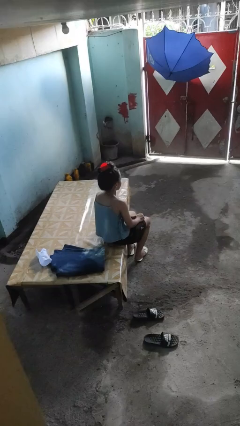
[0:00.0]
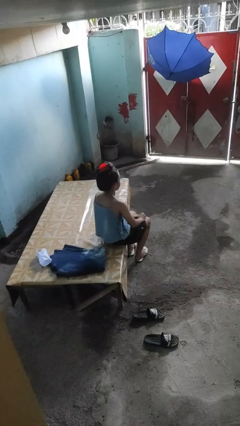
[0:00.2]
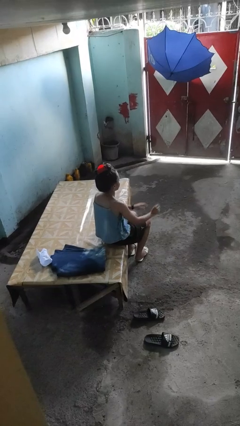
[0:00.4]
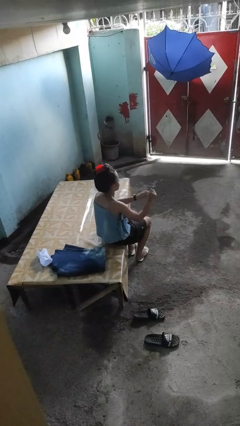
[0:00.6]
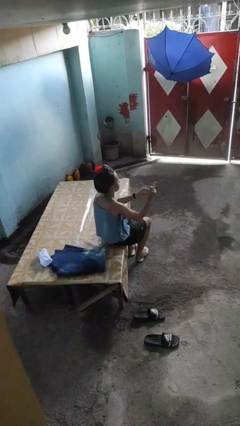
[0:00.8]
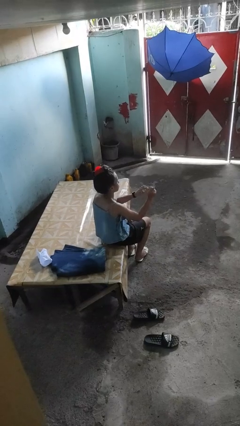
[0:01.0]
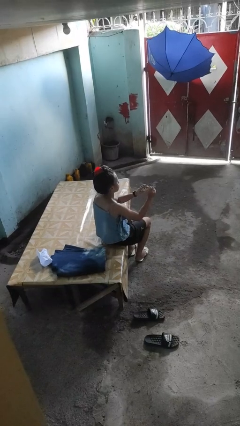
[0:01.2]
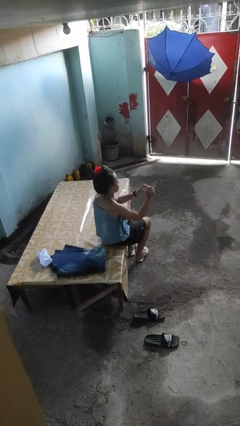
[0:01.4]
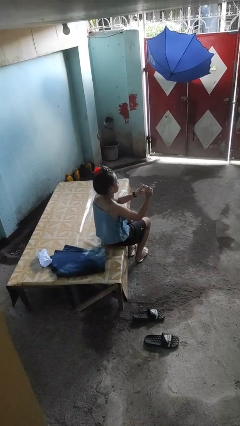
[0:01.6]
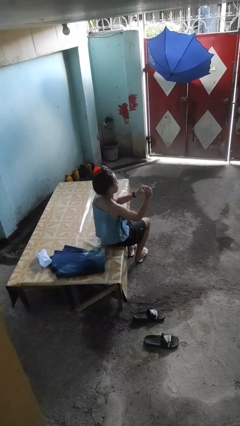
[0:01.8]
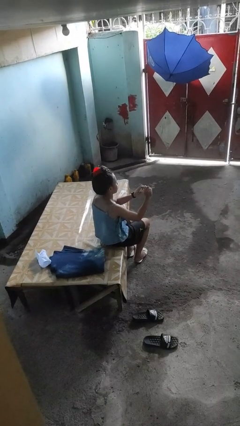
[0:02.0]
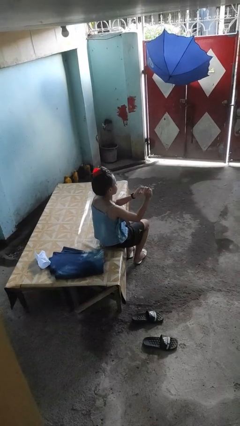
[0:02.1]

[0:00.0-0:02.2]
person clips fingernails

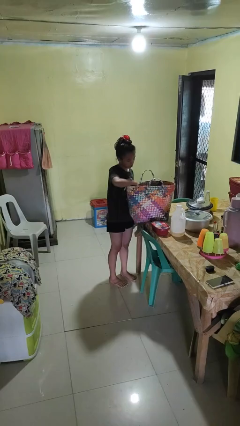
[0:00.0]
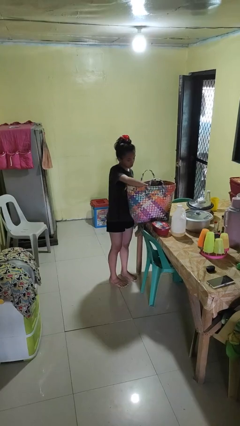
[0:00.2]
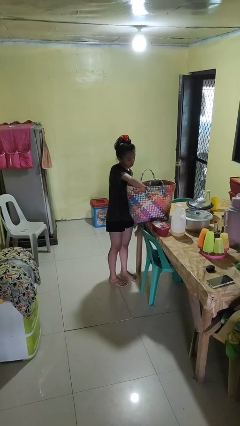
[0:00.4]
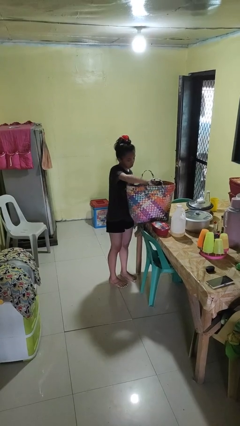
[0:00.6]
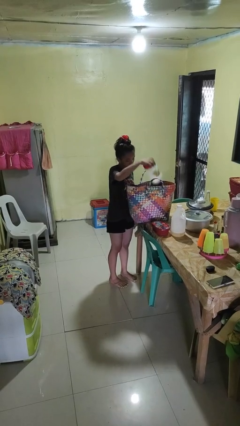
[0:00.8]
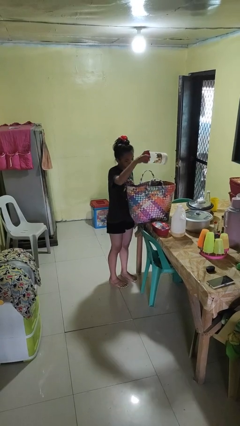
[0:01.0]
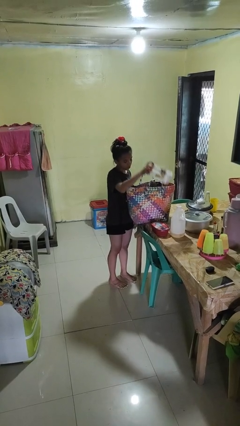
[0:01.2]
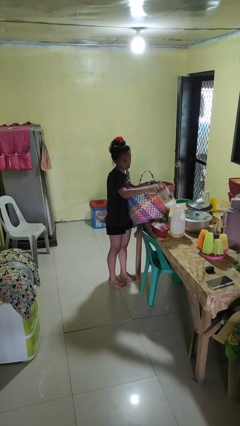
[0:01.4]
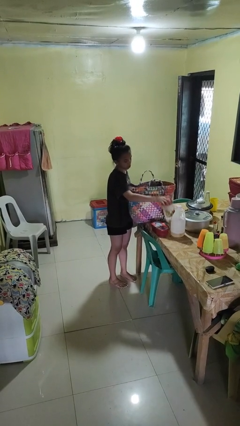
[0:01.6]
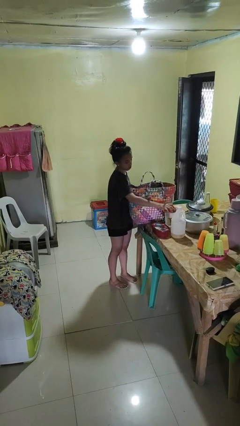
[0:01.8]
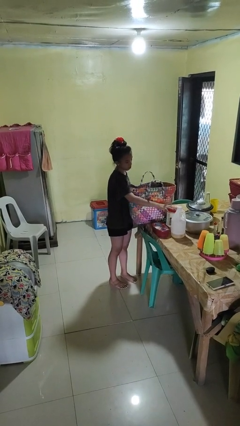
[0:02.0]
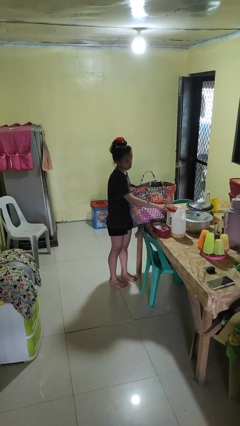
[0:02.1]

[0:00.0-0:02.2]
person takes object from basket

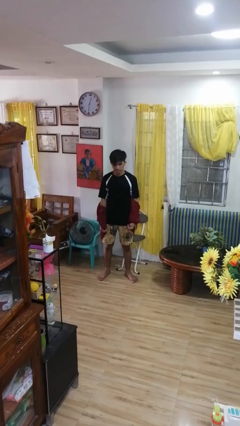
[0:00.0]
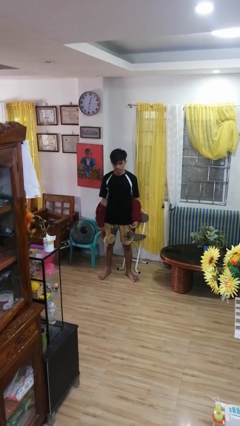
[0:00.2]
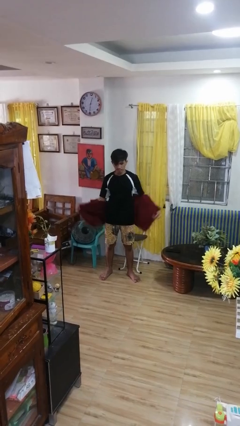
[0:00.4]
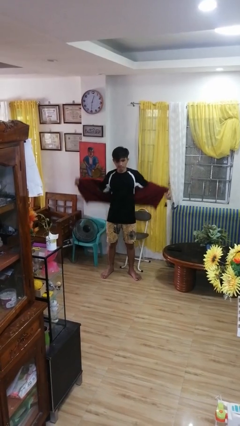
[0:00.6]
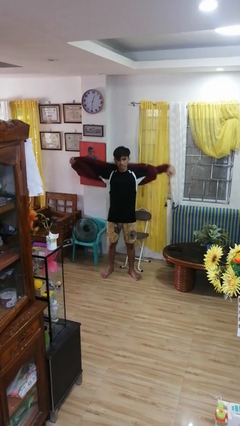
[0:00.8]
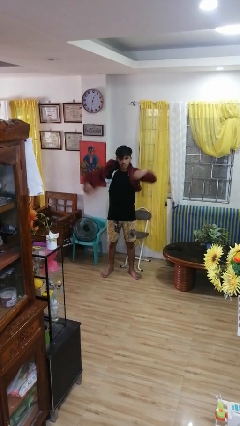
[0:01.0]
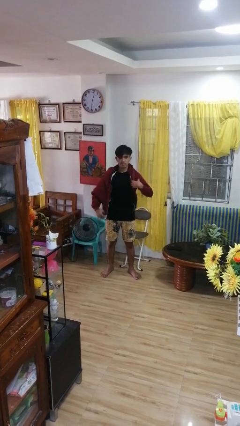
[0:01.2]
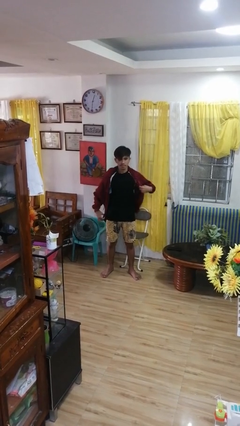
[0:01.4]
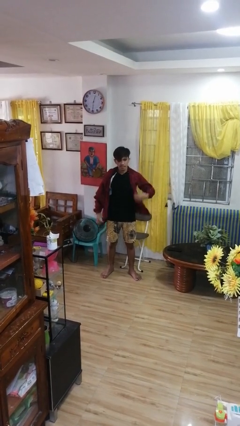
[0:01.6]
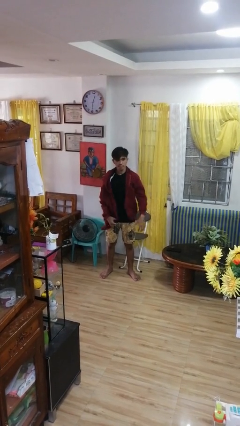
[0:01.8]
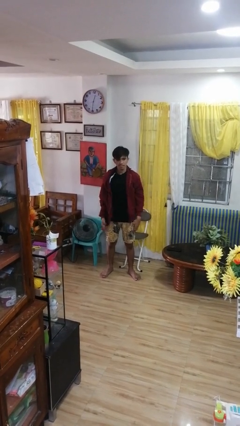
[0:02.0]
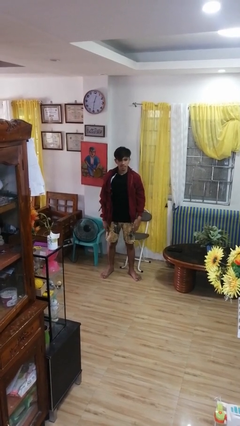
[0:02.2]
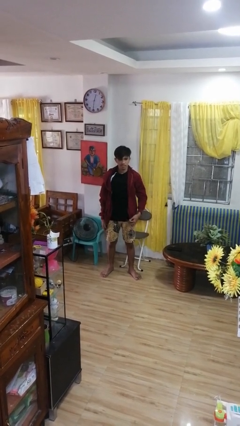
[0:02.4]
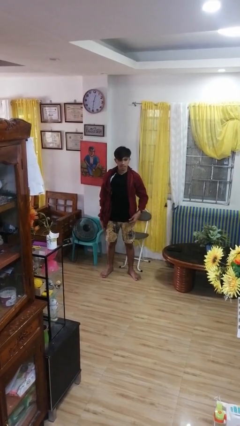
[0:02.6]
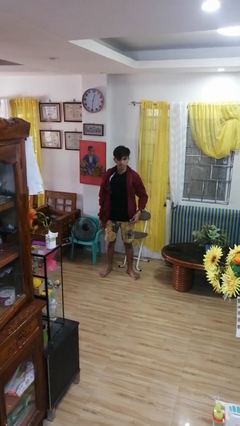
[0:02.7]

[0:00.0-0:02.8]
person puts on jacket

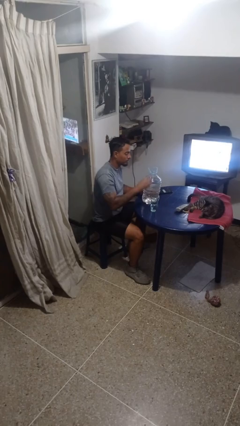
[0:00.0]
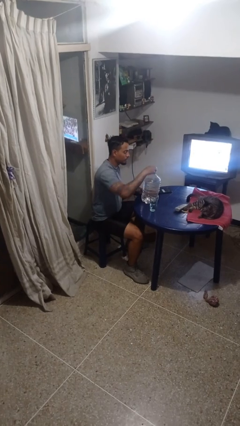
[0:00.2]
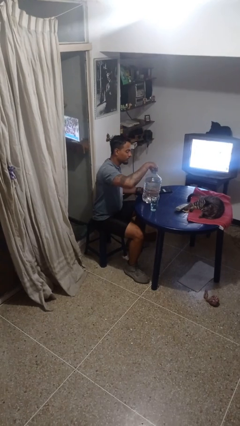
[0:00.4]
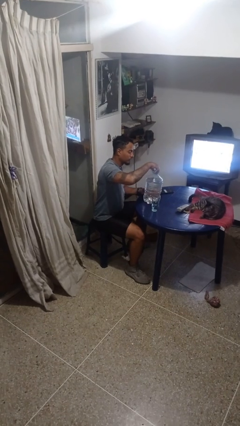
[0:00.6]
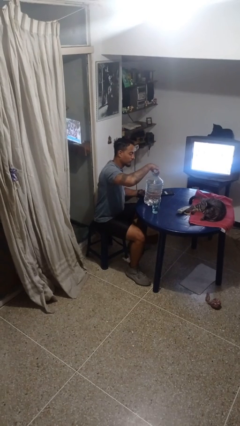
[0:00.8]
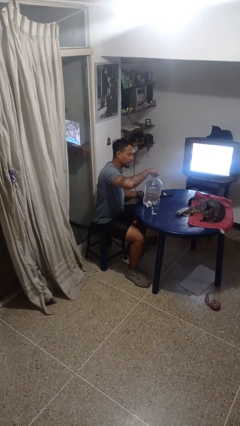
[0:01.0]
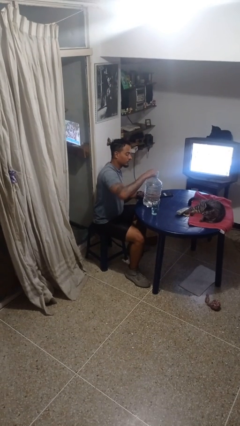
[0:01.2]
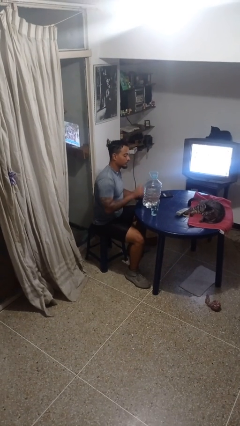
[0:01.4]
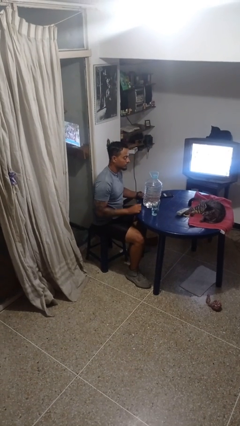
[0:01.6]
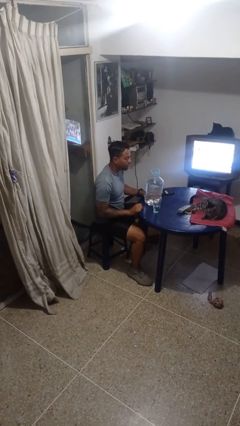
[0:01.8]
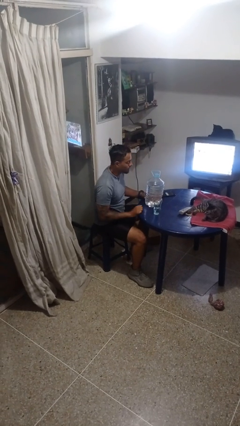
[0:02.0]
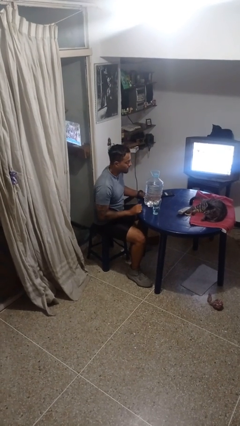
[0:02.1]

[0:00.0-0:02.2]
person screws lid to bottle

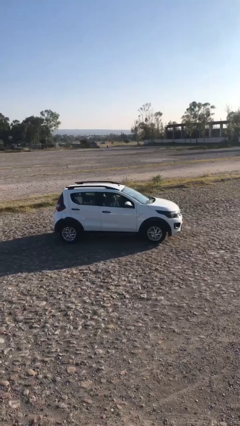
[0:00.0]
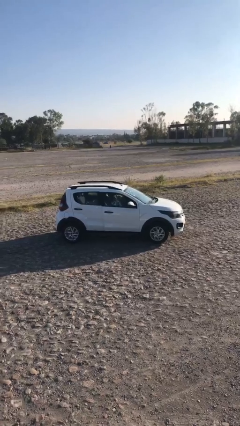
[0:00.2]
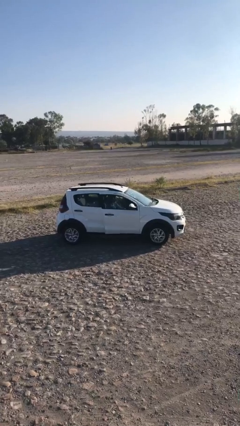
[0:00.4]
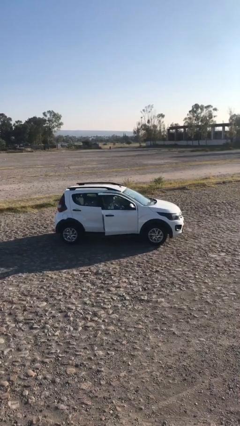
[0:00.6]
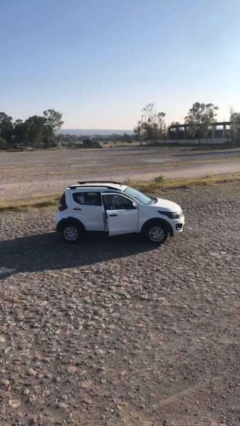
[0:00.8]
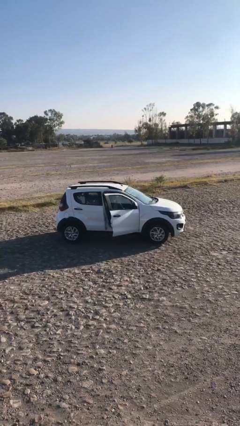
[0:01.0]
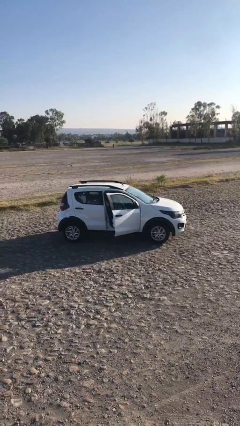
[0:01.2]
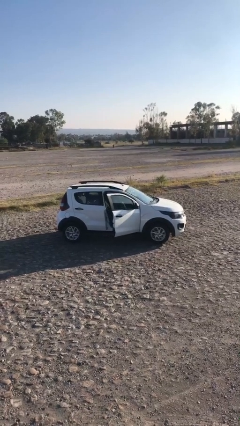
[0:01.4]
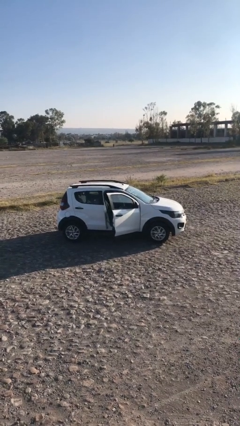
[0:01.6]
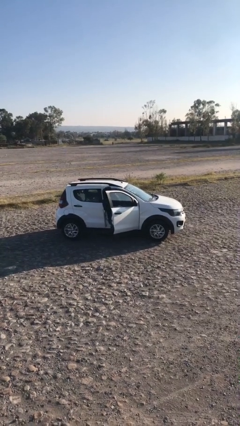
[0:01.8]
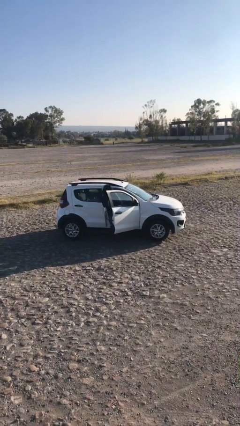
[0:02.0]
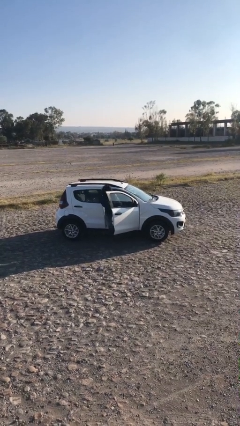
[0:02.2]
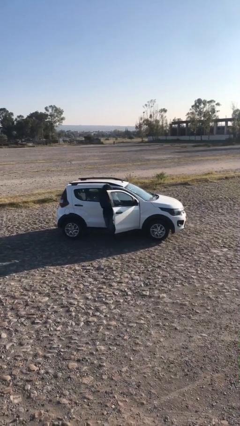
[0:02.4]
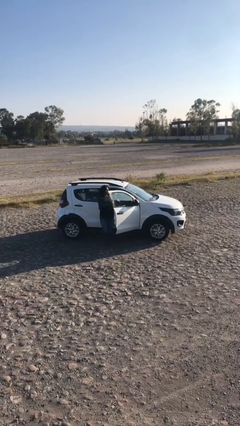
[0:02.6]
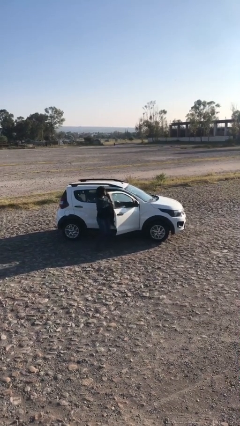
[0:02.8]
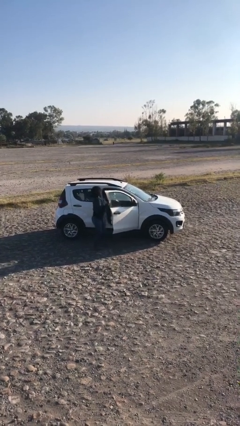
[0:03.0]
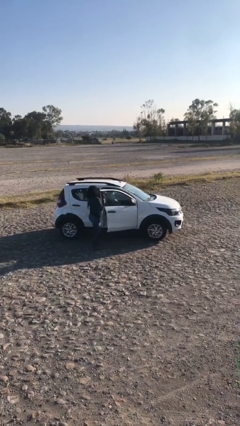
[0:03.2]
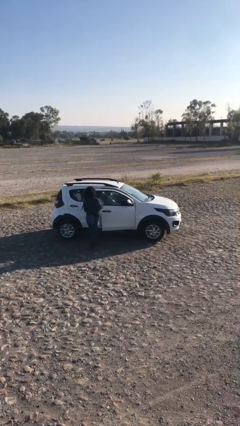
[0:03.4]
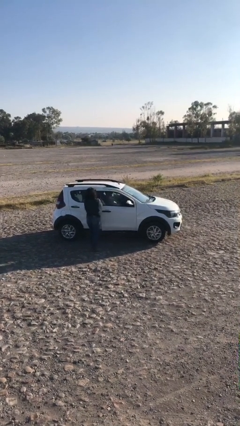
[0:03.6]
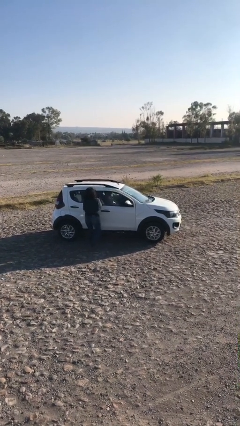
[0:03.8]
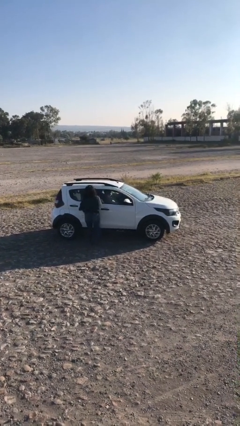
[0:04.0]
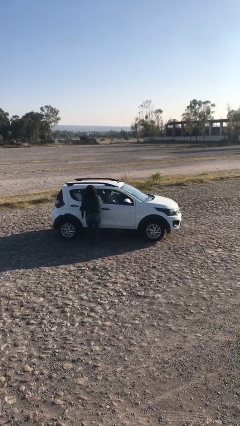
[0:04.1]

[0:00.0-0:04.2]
car drops off person

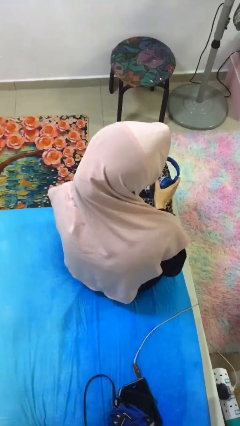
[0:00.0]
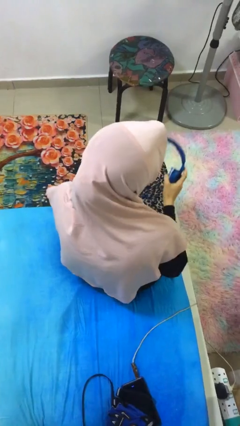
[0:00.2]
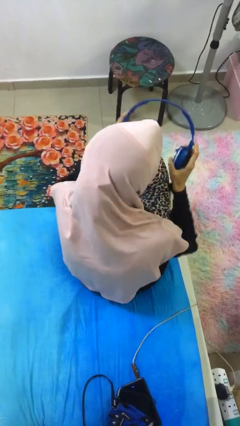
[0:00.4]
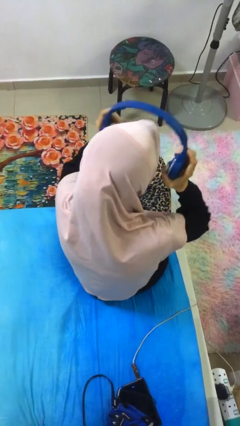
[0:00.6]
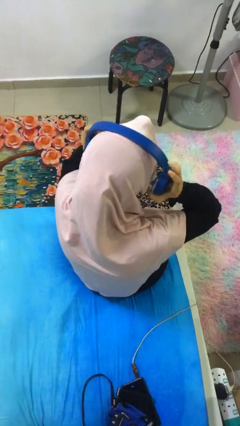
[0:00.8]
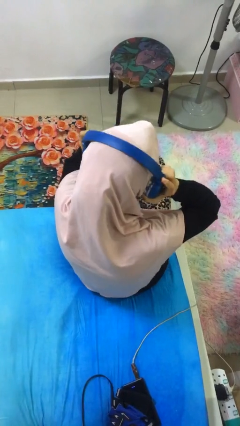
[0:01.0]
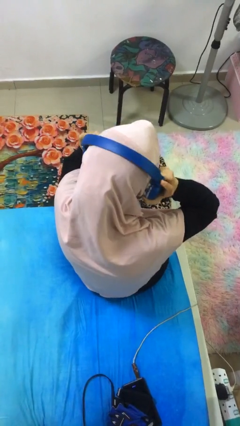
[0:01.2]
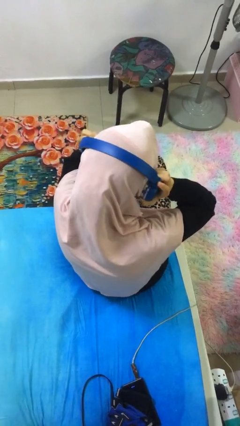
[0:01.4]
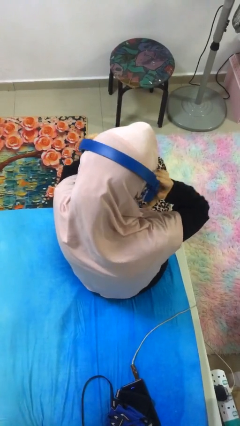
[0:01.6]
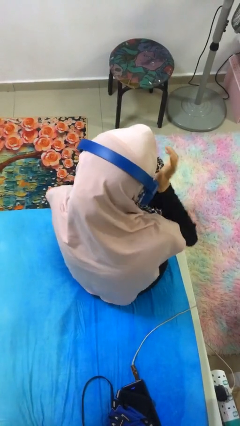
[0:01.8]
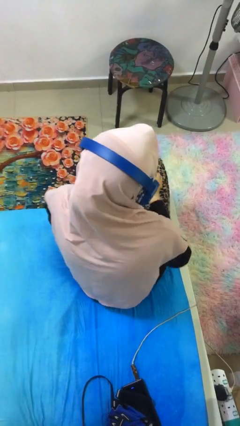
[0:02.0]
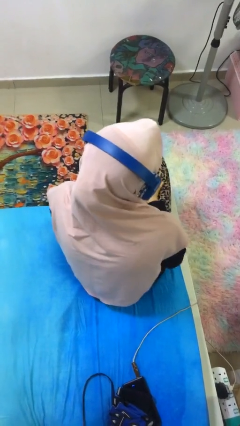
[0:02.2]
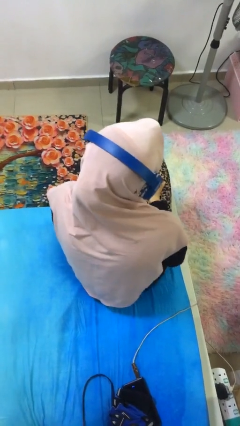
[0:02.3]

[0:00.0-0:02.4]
person puts on headphones

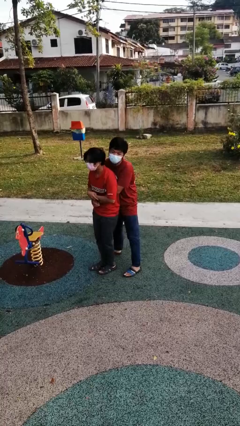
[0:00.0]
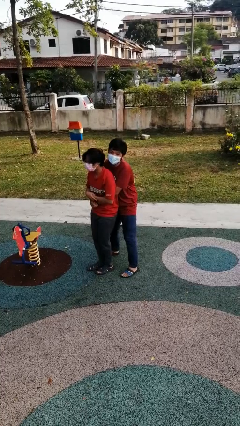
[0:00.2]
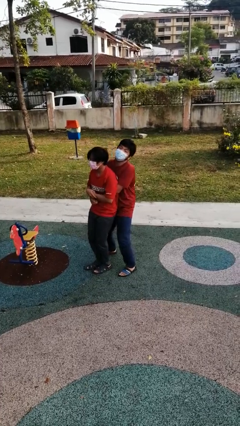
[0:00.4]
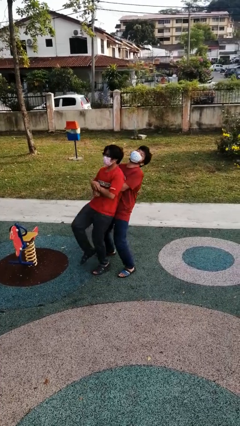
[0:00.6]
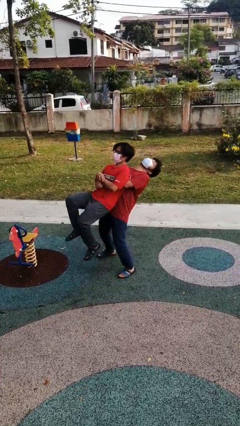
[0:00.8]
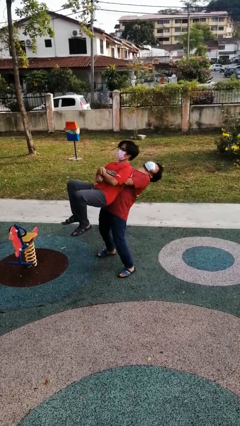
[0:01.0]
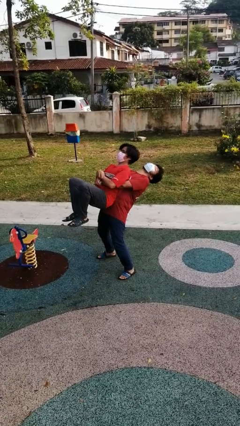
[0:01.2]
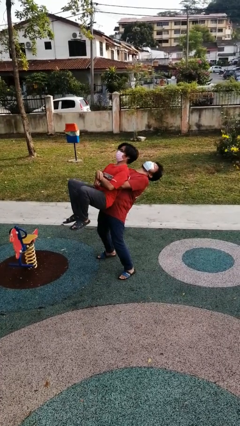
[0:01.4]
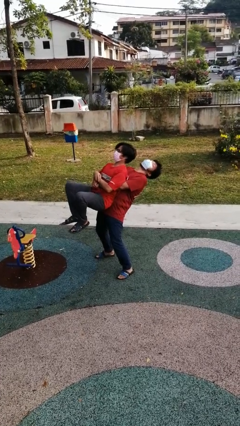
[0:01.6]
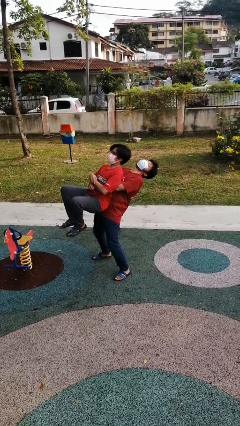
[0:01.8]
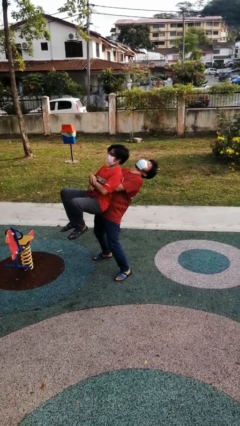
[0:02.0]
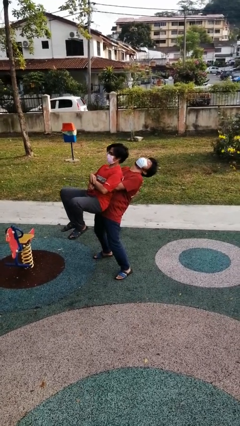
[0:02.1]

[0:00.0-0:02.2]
person picks up person
